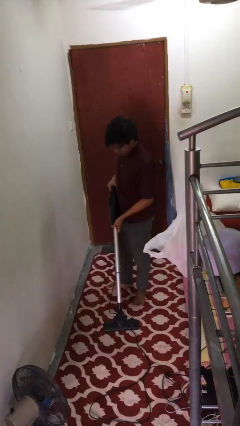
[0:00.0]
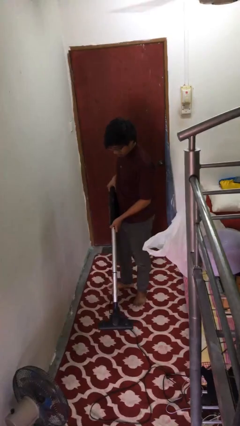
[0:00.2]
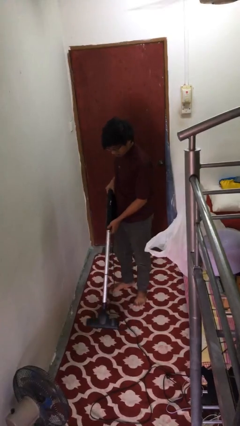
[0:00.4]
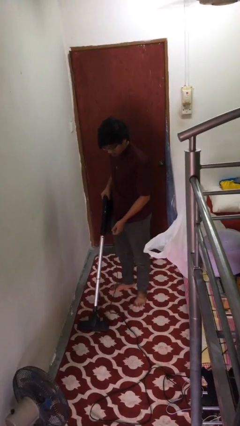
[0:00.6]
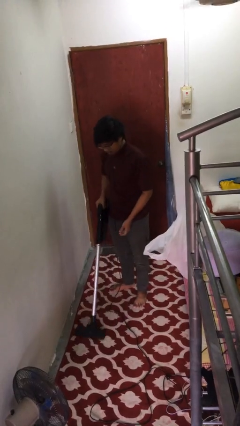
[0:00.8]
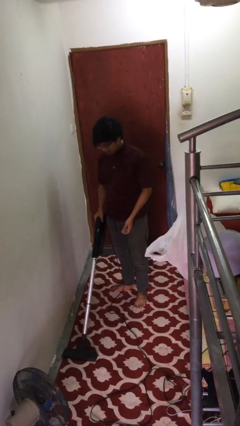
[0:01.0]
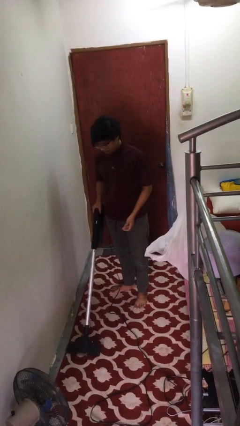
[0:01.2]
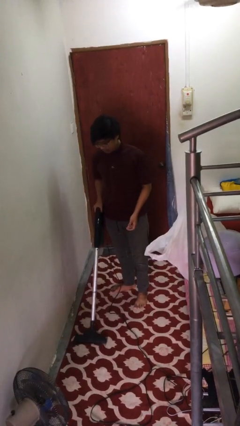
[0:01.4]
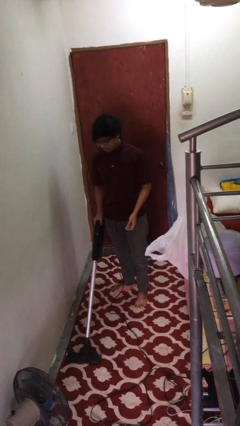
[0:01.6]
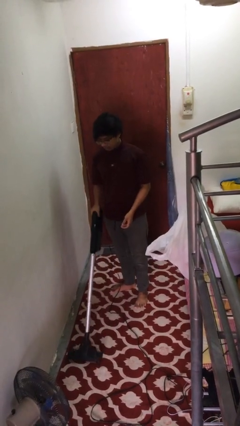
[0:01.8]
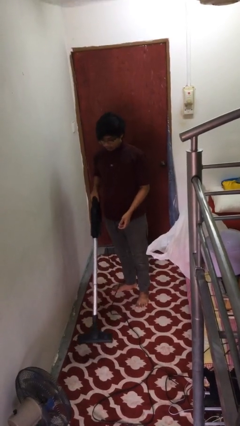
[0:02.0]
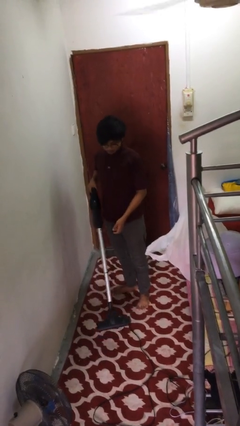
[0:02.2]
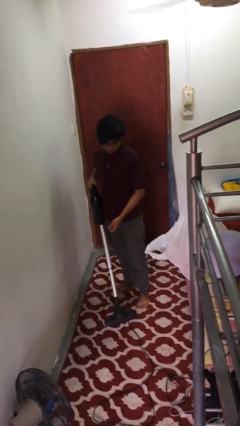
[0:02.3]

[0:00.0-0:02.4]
person vacuums carpet

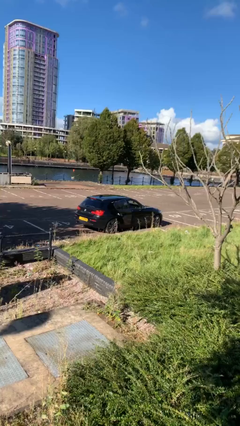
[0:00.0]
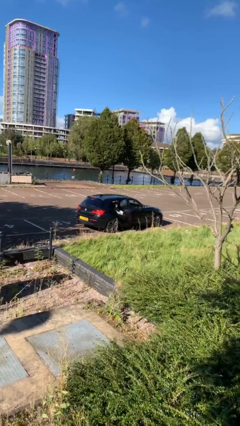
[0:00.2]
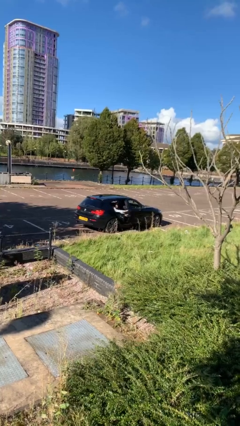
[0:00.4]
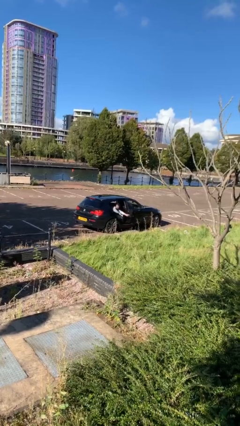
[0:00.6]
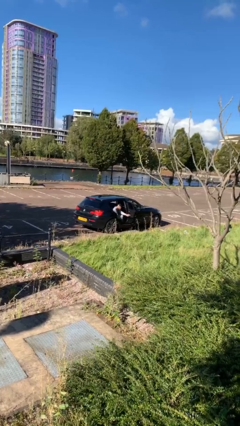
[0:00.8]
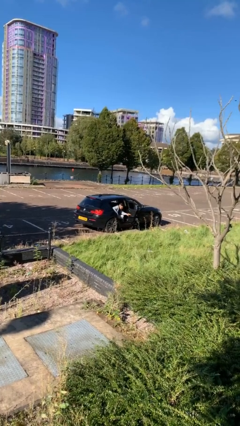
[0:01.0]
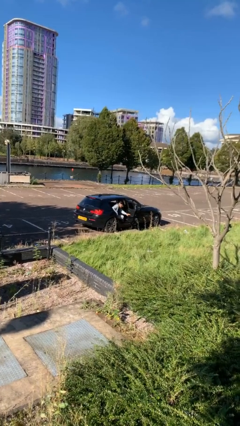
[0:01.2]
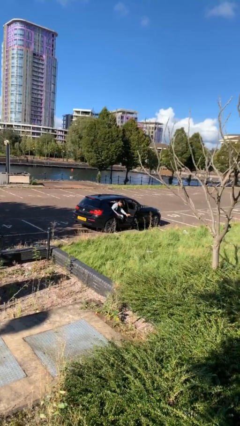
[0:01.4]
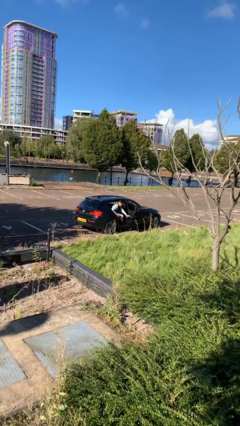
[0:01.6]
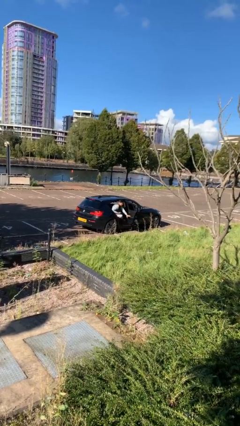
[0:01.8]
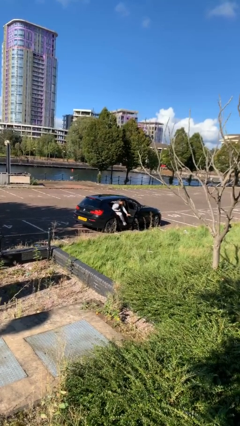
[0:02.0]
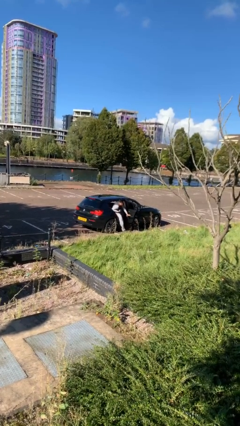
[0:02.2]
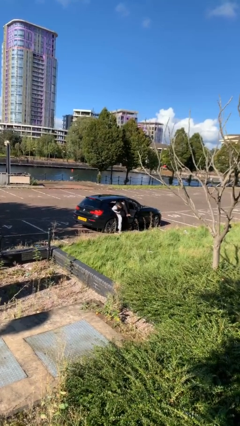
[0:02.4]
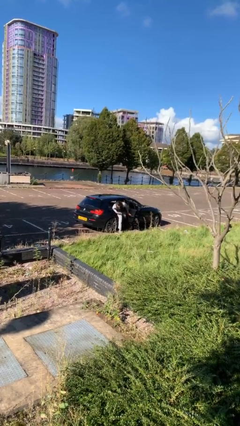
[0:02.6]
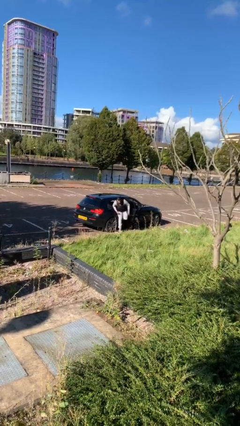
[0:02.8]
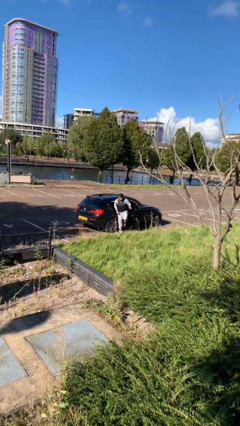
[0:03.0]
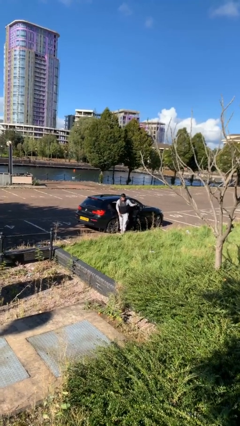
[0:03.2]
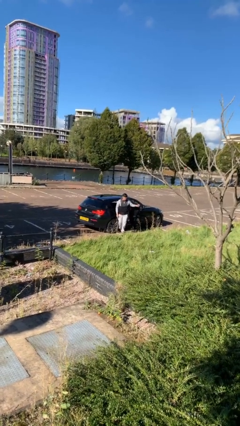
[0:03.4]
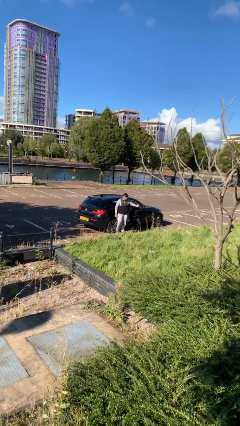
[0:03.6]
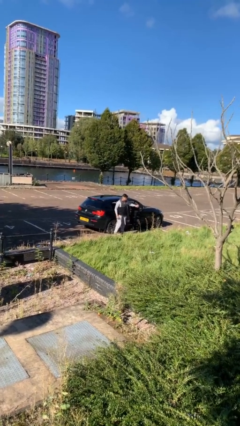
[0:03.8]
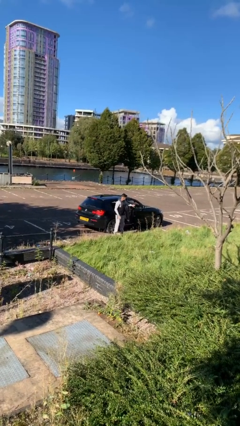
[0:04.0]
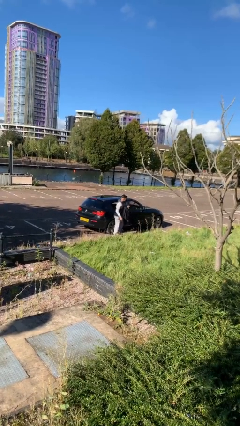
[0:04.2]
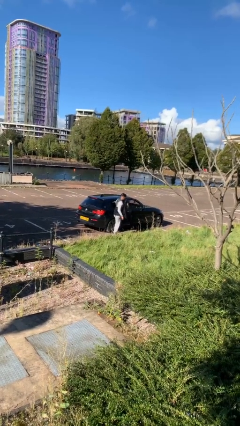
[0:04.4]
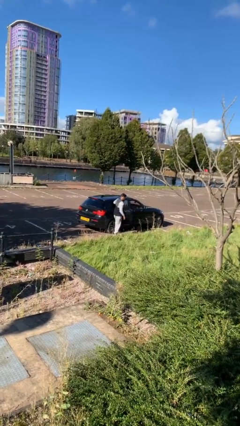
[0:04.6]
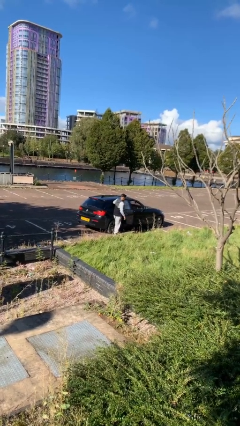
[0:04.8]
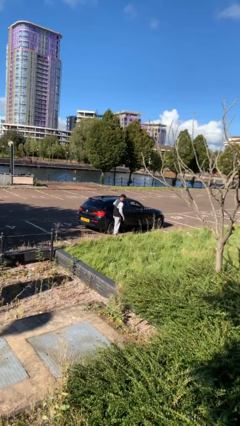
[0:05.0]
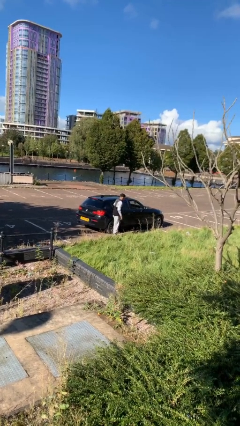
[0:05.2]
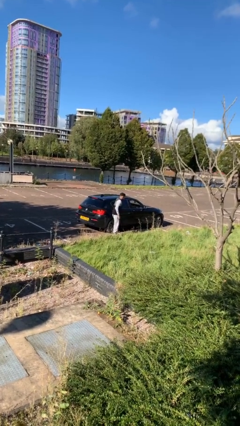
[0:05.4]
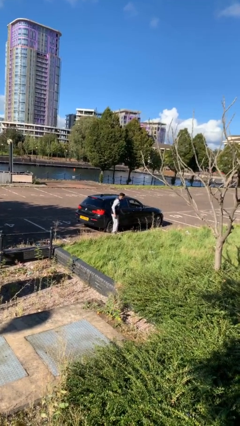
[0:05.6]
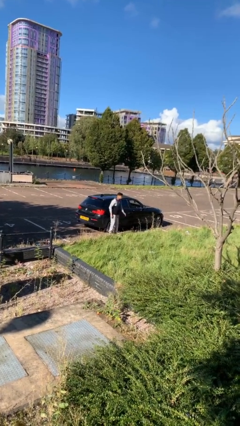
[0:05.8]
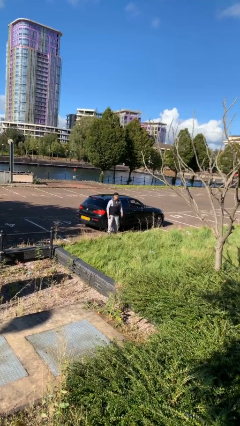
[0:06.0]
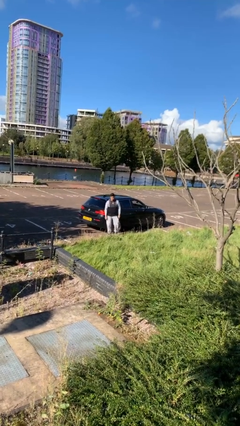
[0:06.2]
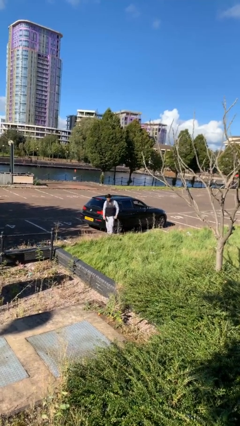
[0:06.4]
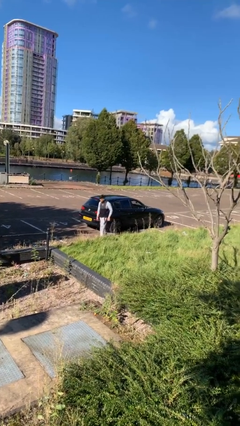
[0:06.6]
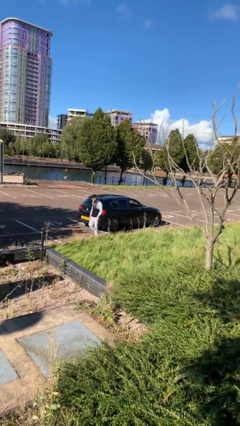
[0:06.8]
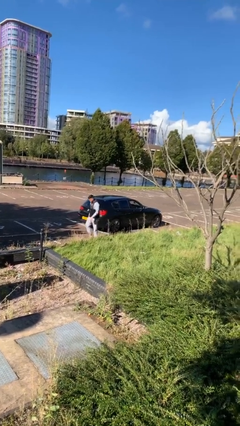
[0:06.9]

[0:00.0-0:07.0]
car drops off person

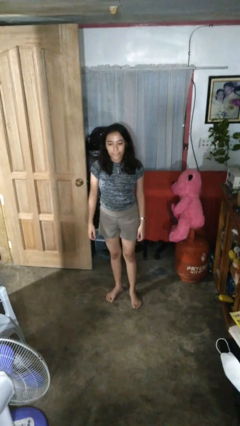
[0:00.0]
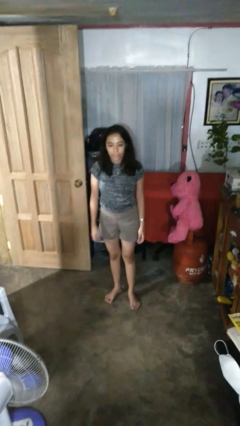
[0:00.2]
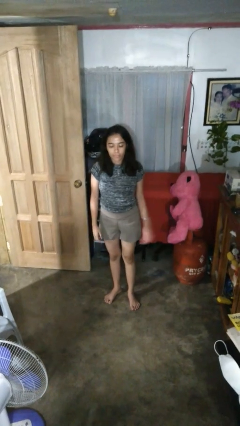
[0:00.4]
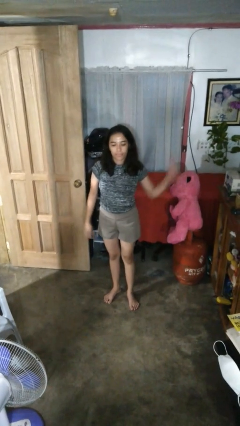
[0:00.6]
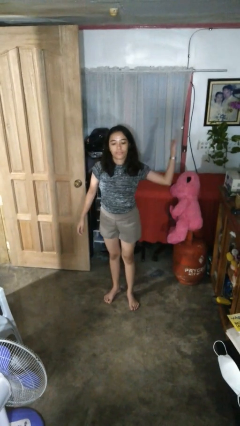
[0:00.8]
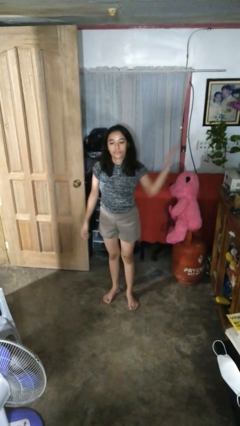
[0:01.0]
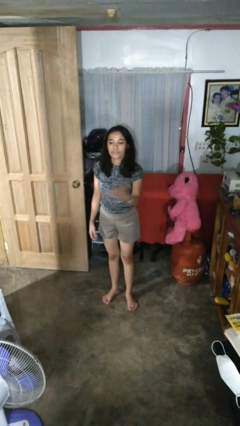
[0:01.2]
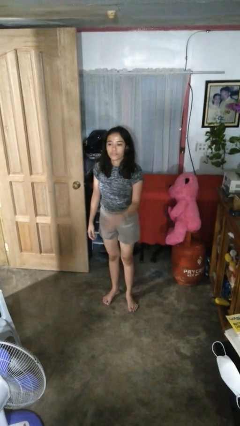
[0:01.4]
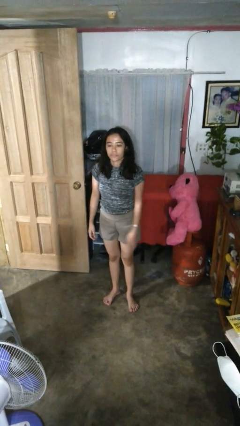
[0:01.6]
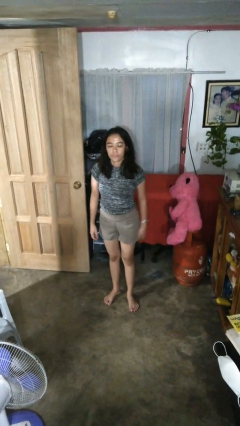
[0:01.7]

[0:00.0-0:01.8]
person karate chop

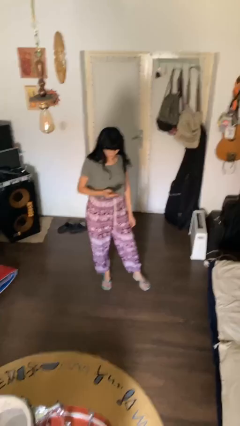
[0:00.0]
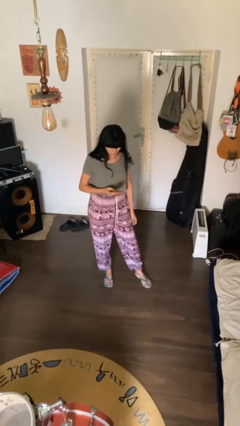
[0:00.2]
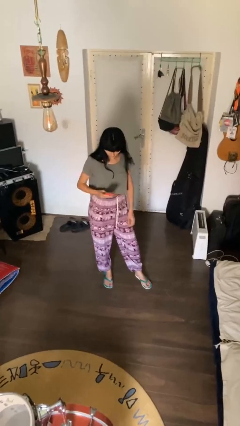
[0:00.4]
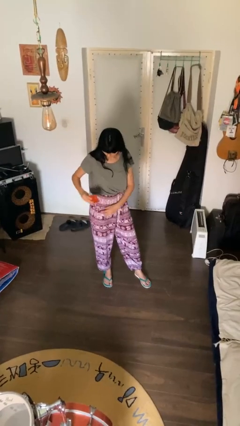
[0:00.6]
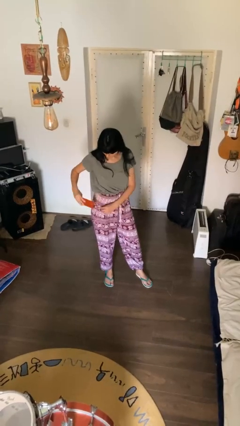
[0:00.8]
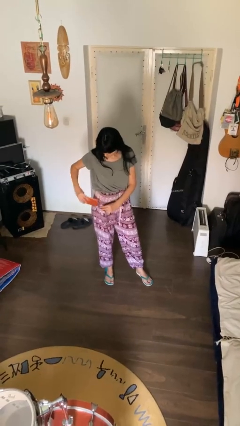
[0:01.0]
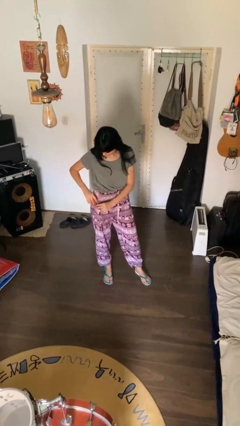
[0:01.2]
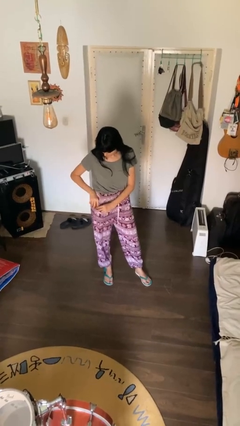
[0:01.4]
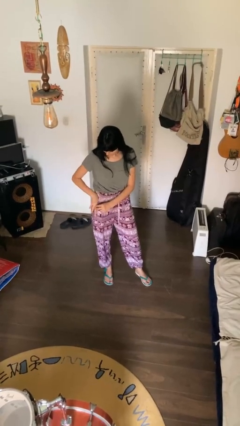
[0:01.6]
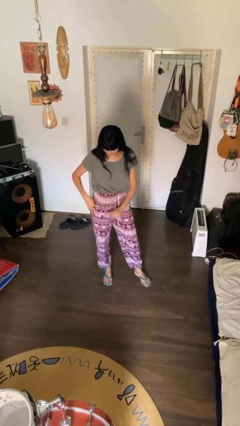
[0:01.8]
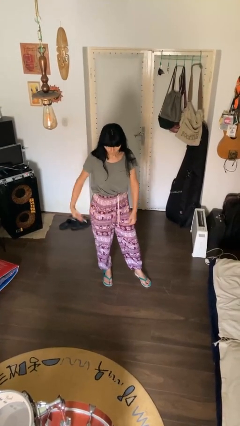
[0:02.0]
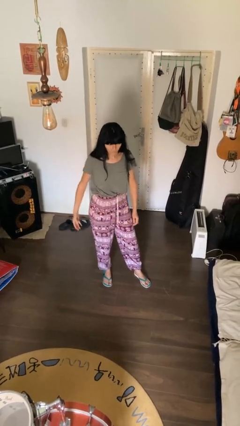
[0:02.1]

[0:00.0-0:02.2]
person puts phone into pocket

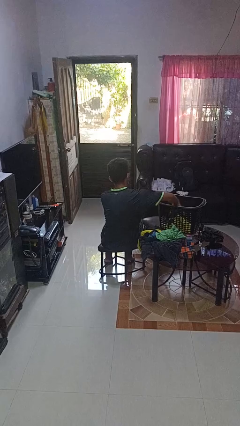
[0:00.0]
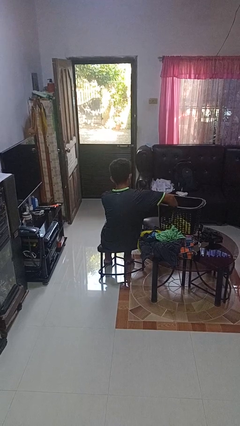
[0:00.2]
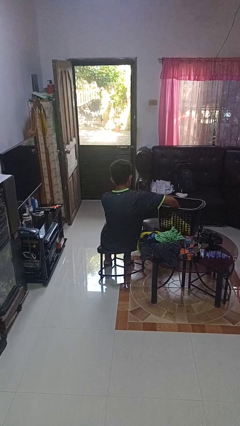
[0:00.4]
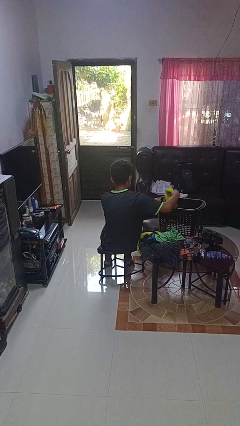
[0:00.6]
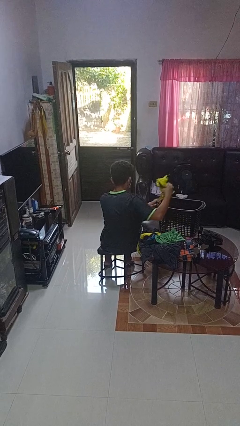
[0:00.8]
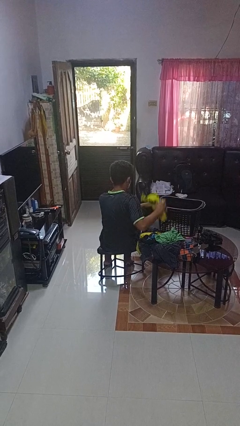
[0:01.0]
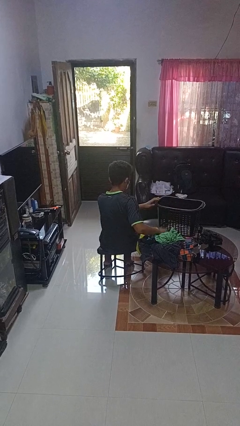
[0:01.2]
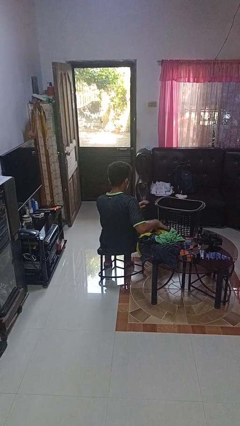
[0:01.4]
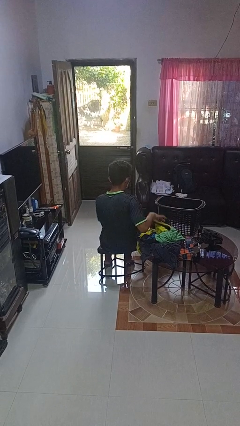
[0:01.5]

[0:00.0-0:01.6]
person takes object from basket

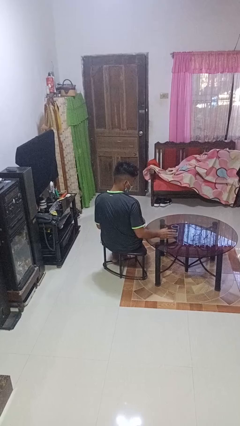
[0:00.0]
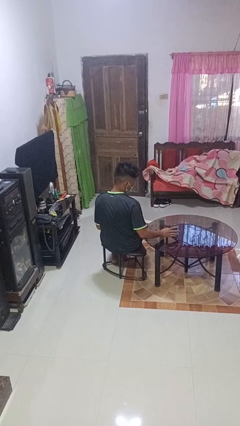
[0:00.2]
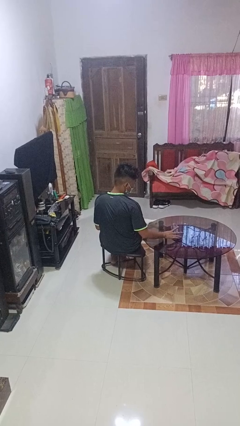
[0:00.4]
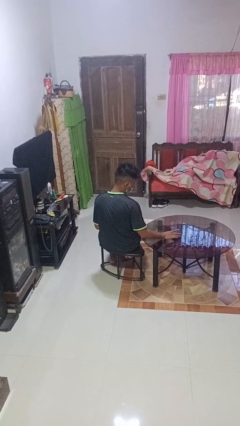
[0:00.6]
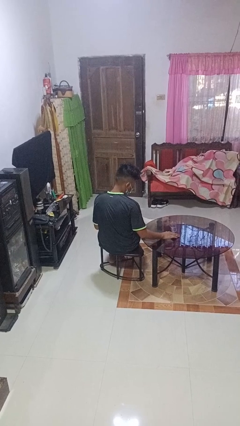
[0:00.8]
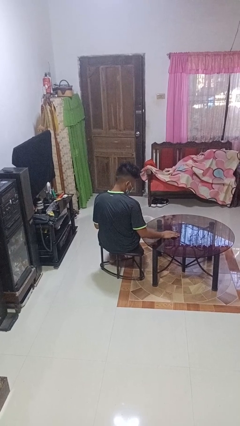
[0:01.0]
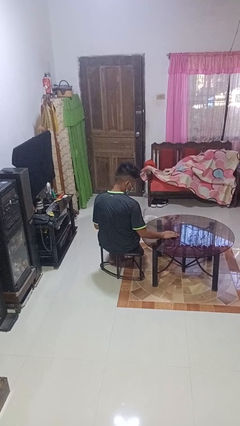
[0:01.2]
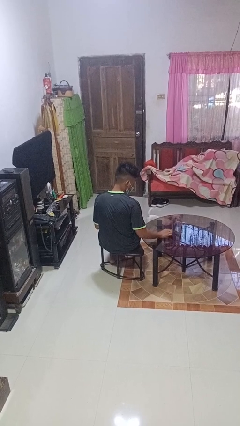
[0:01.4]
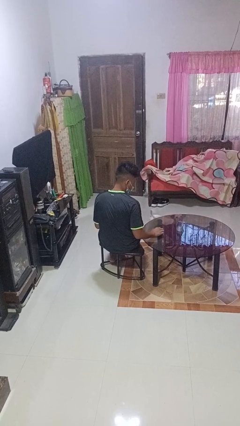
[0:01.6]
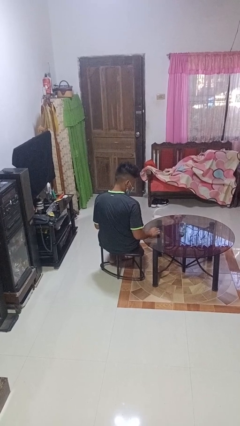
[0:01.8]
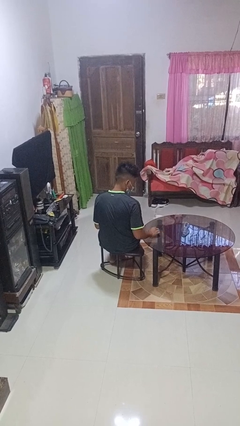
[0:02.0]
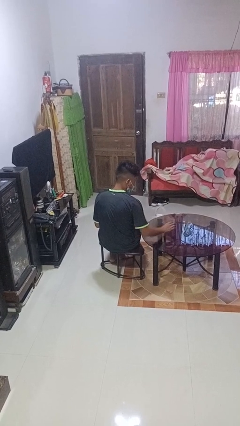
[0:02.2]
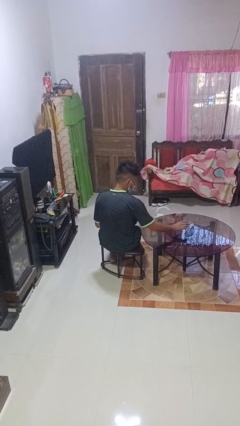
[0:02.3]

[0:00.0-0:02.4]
person knocks over glass

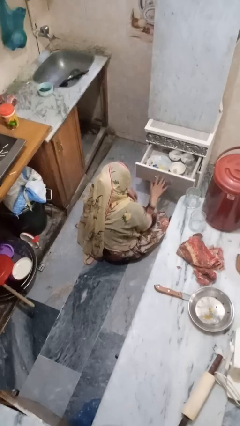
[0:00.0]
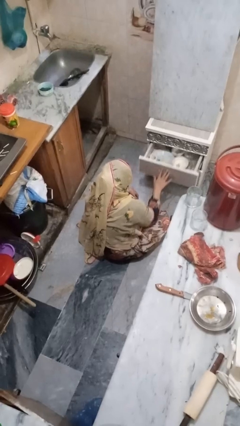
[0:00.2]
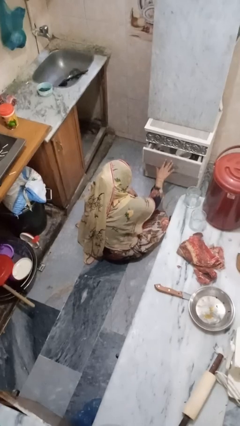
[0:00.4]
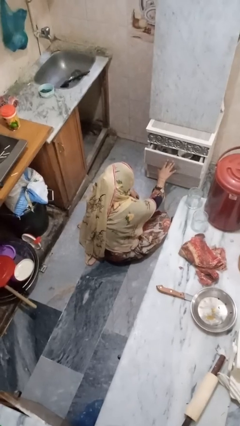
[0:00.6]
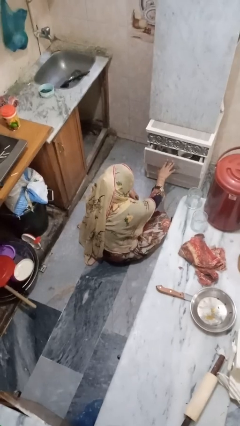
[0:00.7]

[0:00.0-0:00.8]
person closes kitchen drawer
